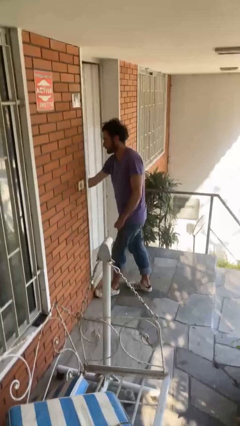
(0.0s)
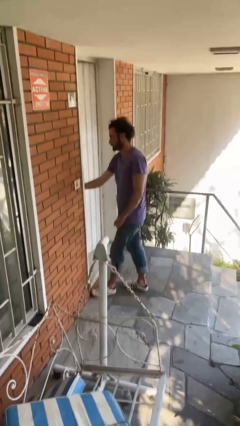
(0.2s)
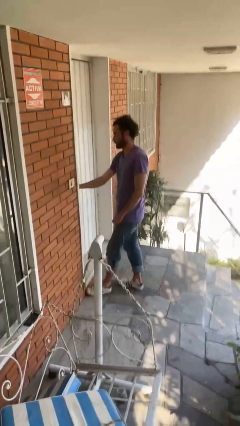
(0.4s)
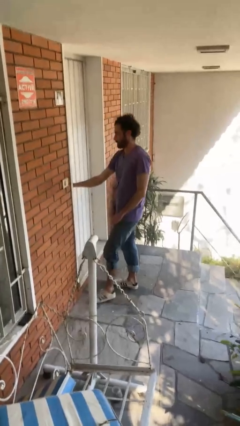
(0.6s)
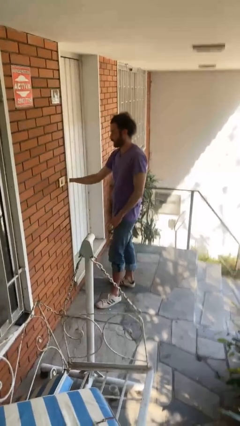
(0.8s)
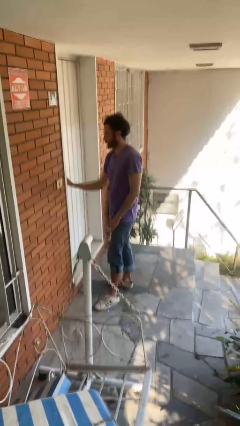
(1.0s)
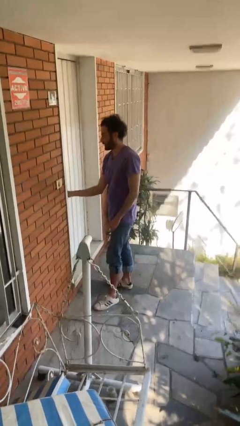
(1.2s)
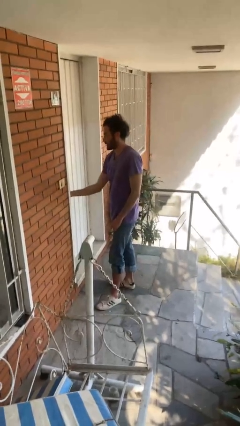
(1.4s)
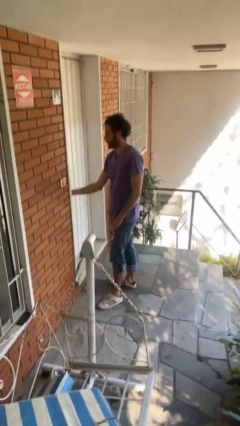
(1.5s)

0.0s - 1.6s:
person closes facility door

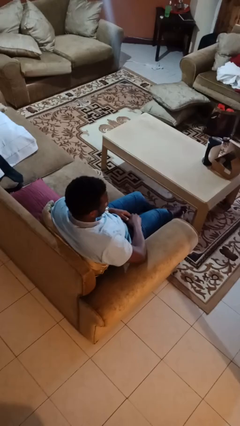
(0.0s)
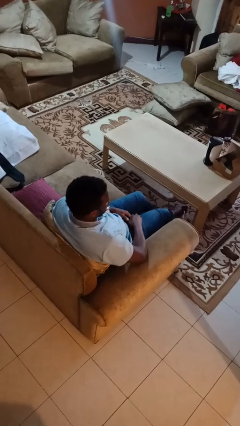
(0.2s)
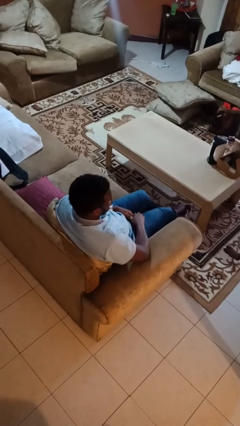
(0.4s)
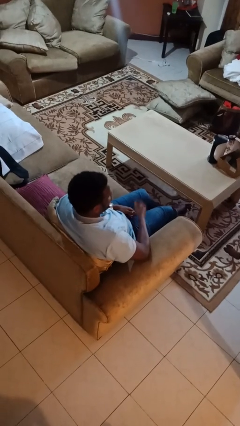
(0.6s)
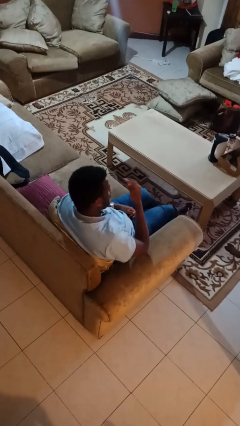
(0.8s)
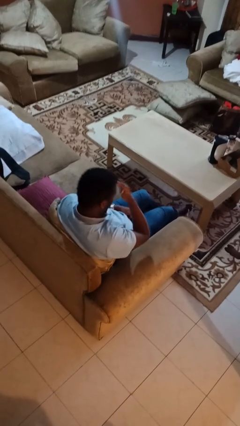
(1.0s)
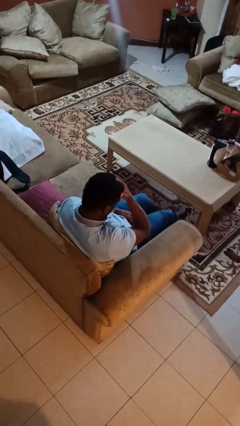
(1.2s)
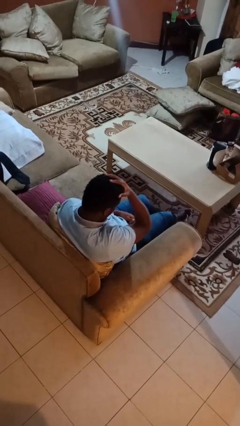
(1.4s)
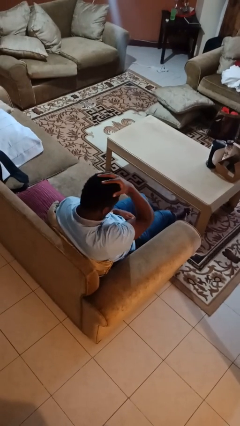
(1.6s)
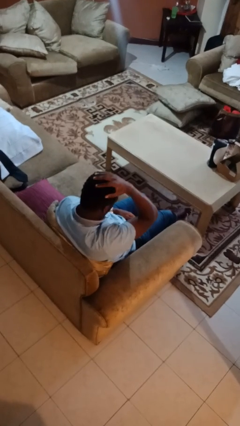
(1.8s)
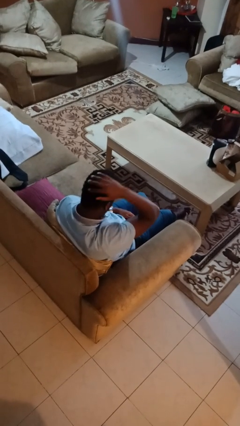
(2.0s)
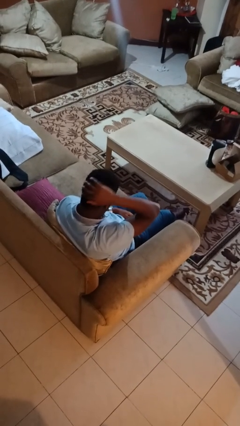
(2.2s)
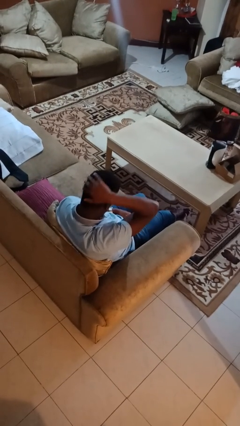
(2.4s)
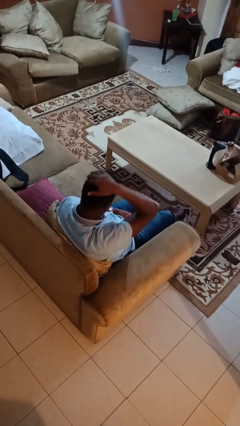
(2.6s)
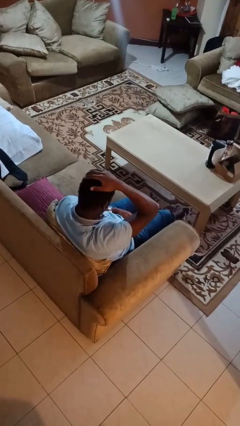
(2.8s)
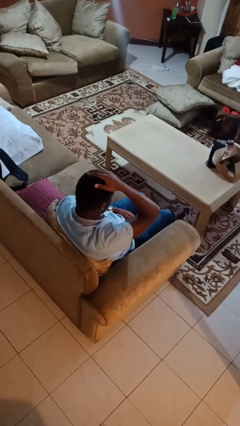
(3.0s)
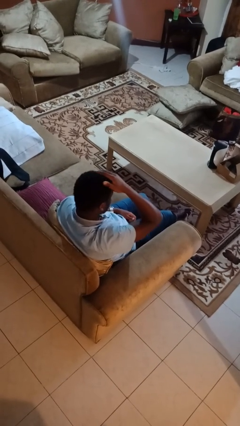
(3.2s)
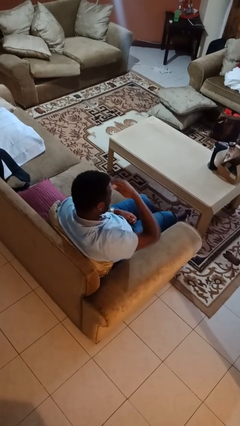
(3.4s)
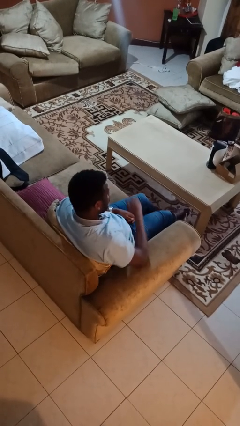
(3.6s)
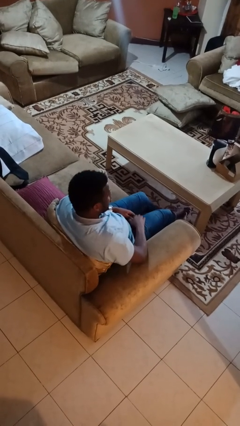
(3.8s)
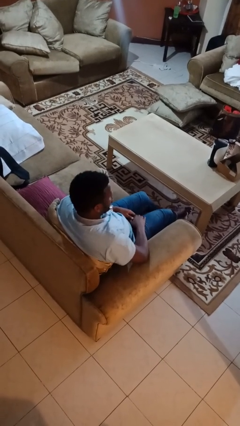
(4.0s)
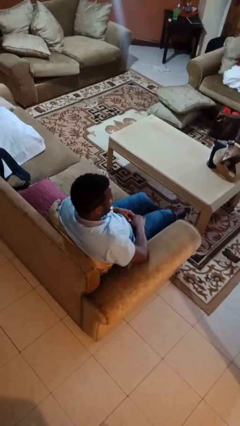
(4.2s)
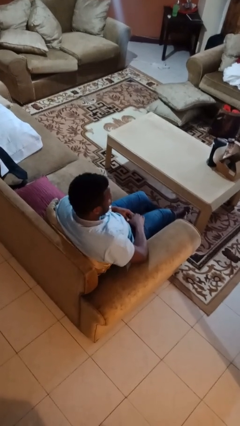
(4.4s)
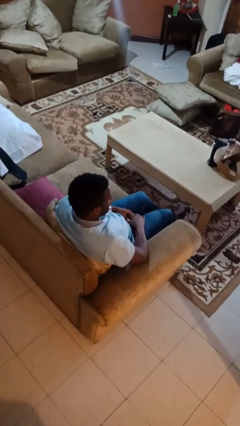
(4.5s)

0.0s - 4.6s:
person strokes hair

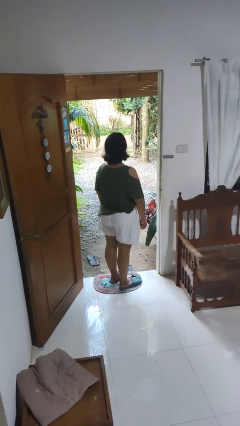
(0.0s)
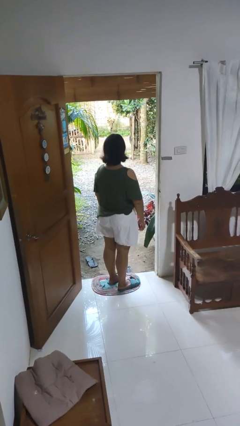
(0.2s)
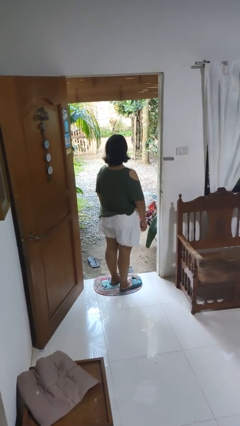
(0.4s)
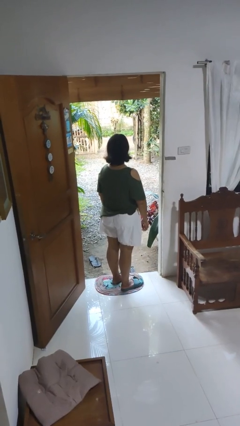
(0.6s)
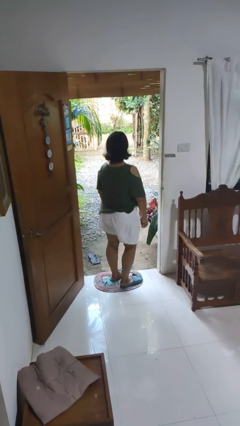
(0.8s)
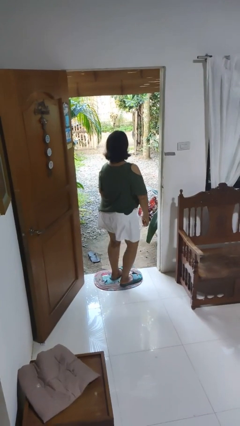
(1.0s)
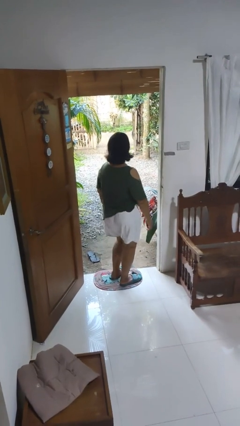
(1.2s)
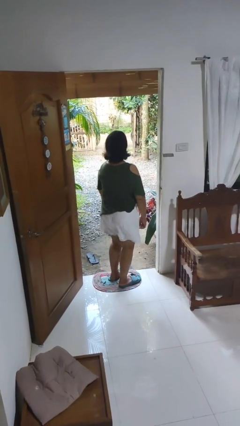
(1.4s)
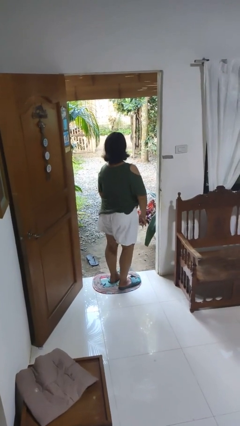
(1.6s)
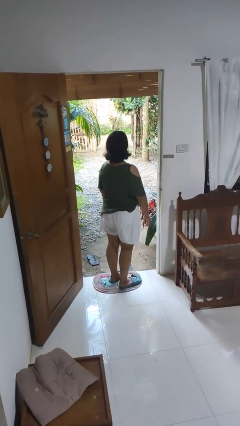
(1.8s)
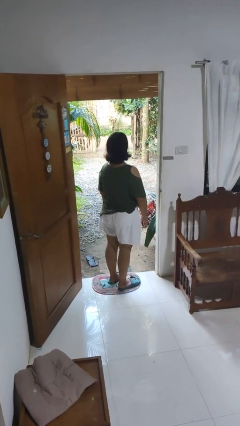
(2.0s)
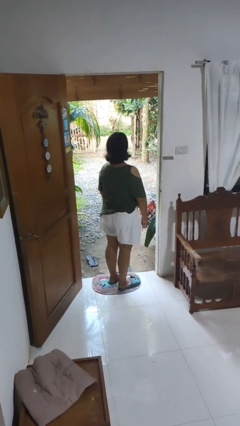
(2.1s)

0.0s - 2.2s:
person wiggles hips

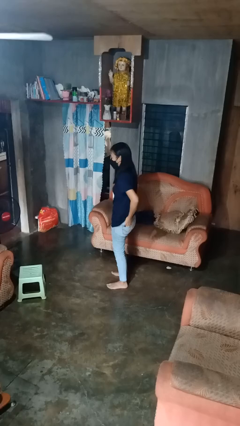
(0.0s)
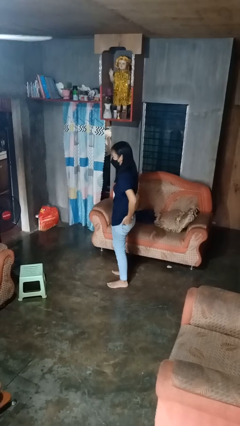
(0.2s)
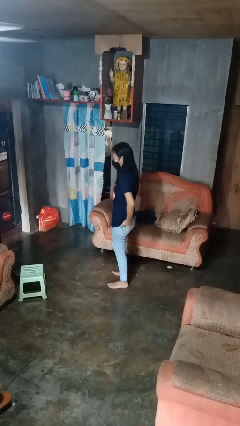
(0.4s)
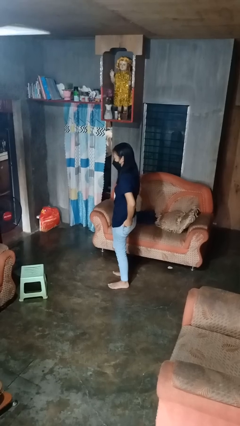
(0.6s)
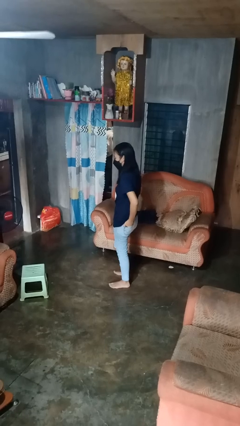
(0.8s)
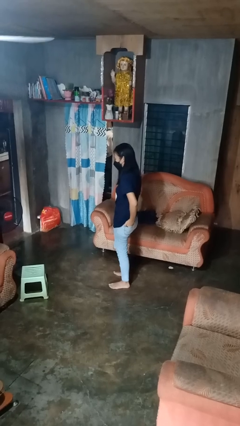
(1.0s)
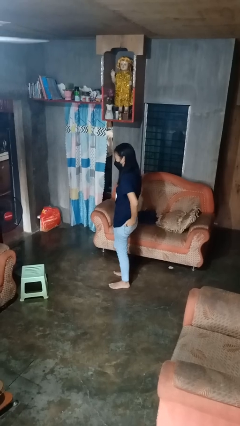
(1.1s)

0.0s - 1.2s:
person puts hands in back pockets

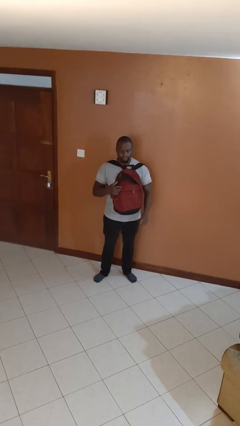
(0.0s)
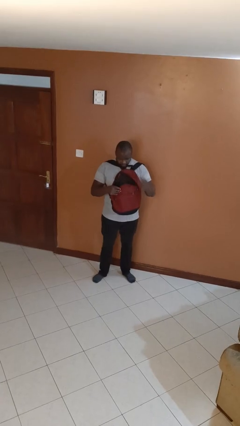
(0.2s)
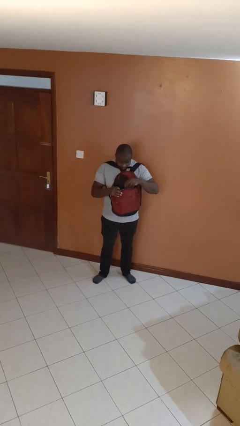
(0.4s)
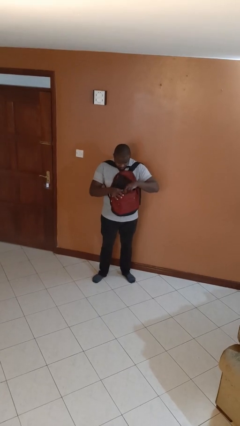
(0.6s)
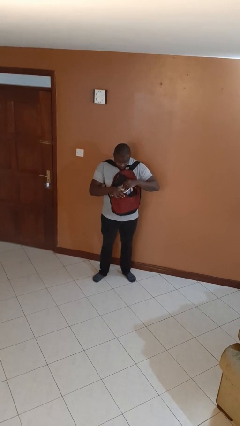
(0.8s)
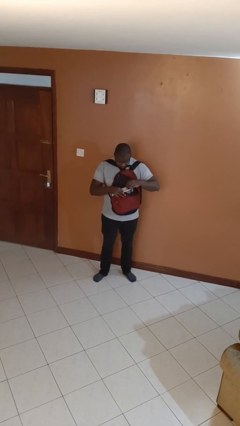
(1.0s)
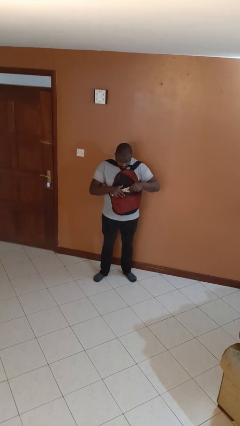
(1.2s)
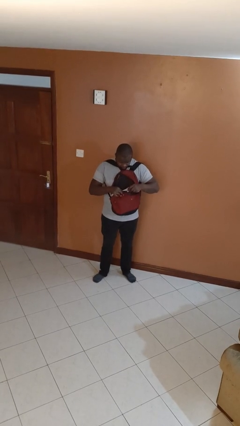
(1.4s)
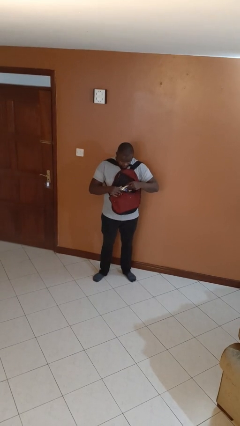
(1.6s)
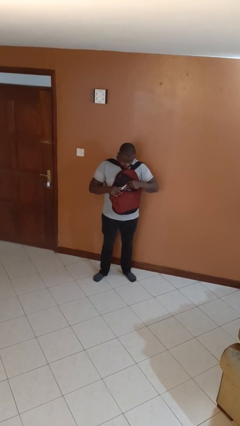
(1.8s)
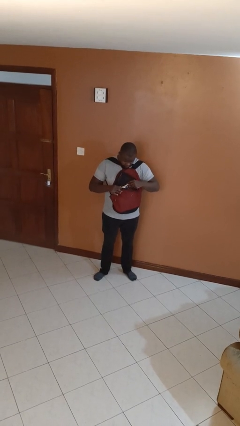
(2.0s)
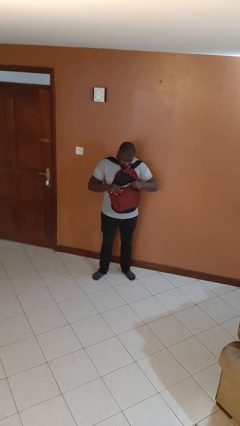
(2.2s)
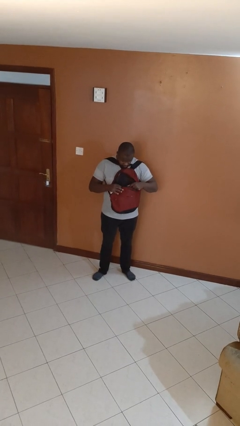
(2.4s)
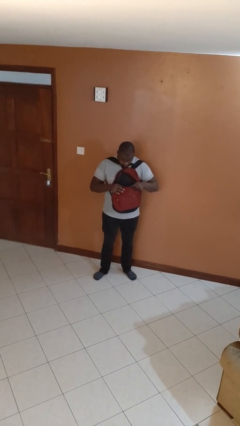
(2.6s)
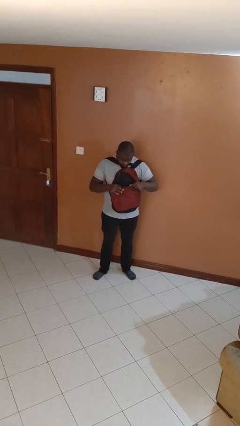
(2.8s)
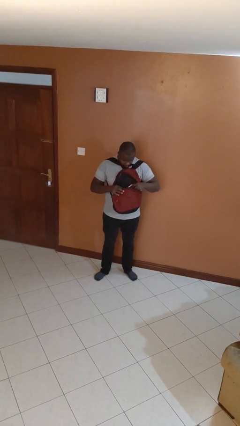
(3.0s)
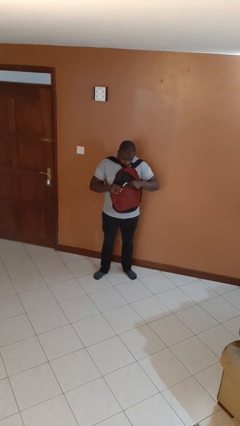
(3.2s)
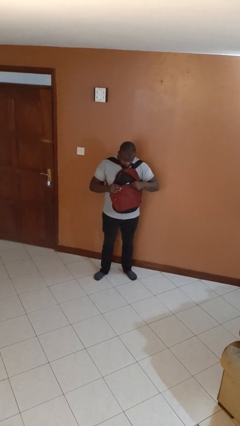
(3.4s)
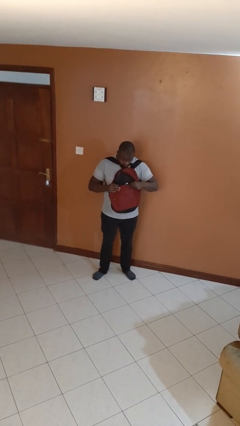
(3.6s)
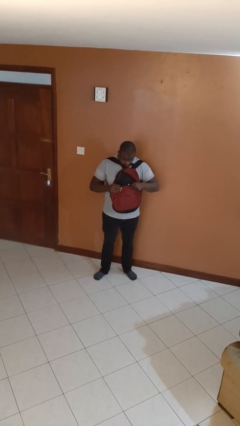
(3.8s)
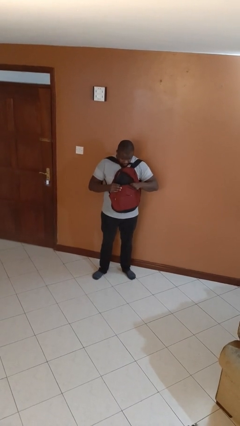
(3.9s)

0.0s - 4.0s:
person searches in backpack

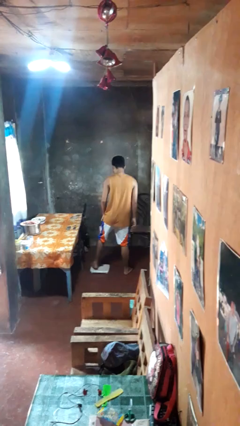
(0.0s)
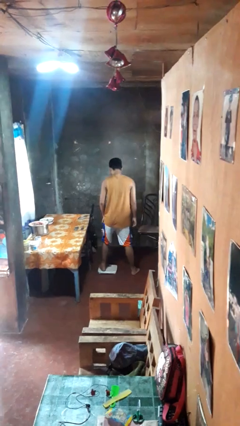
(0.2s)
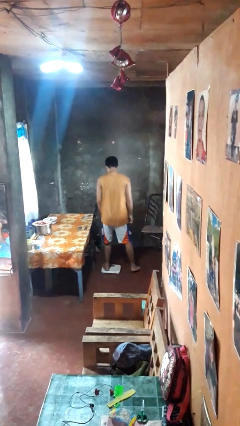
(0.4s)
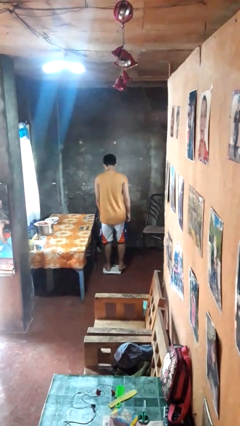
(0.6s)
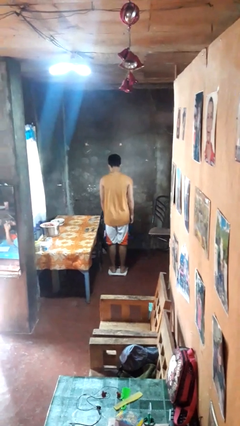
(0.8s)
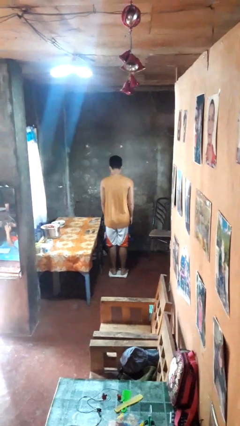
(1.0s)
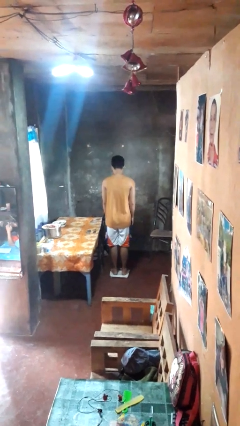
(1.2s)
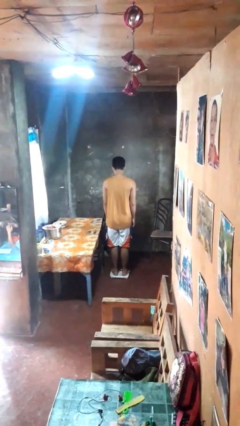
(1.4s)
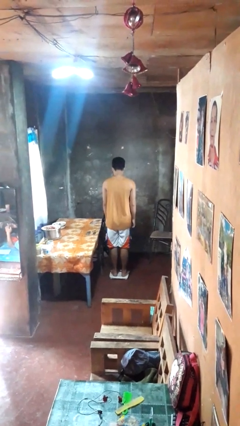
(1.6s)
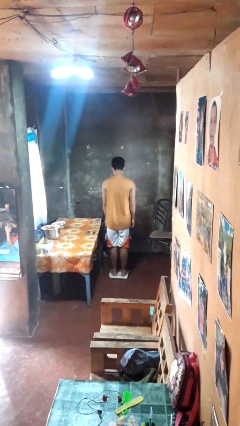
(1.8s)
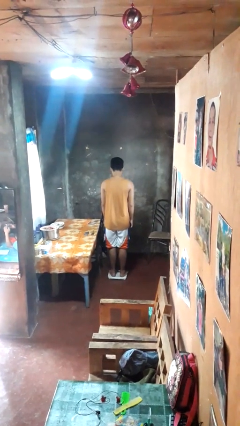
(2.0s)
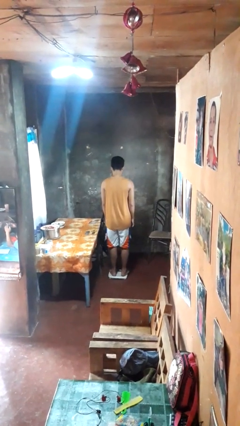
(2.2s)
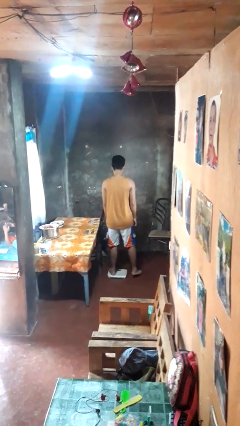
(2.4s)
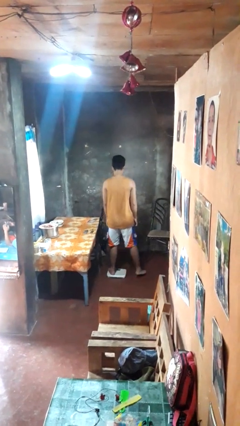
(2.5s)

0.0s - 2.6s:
person uses bodyweight scale

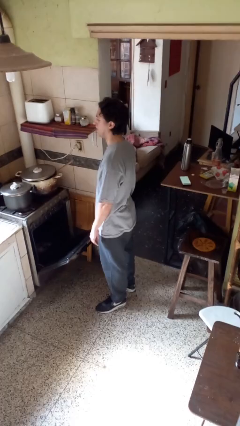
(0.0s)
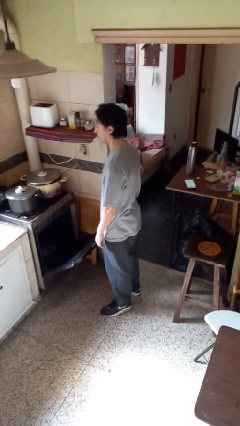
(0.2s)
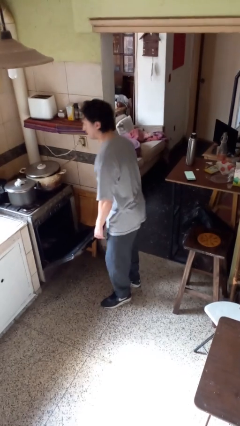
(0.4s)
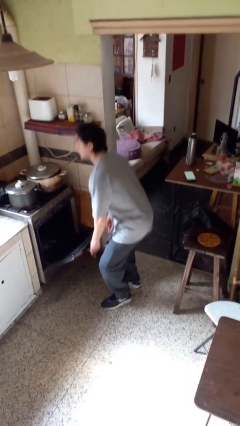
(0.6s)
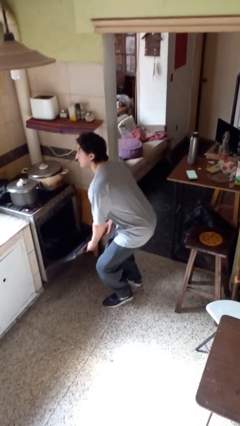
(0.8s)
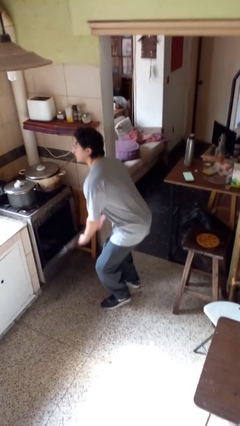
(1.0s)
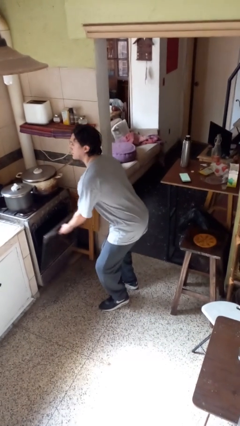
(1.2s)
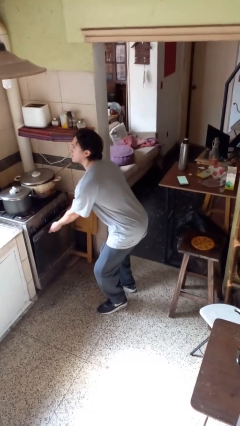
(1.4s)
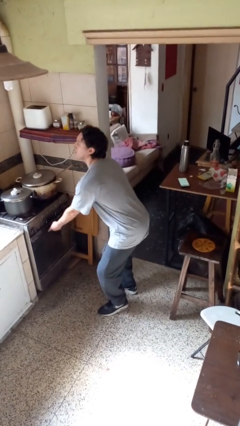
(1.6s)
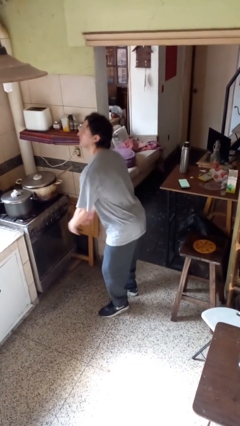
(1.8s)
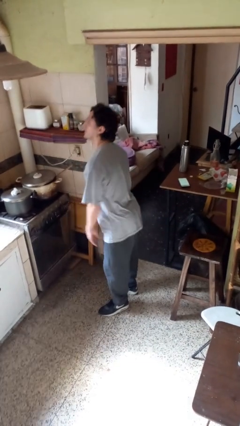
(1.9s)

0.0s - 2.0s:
person closes oven door
